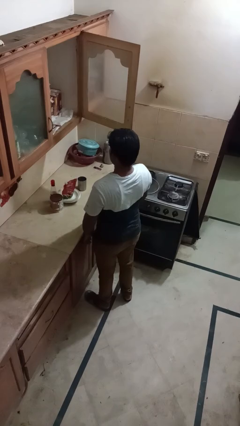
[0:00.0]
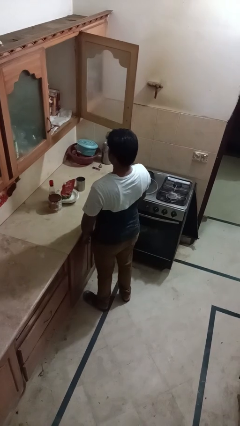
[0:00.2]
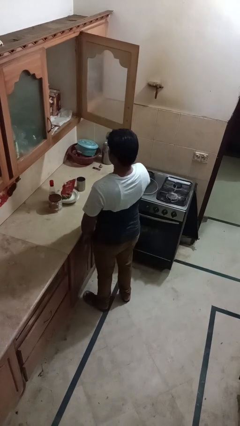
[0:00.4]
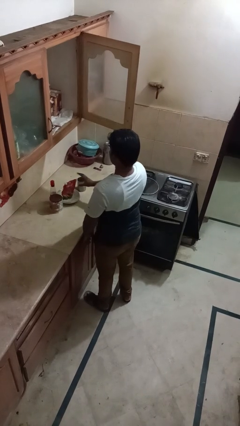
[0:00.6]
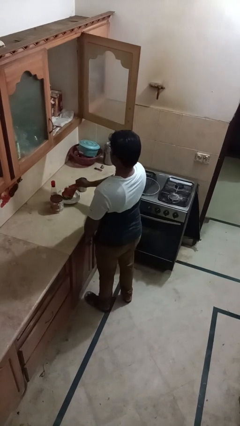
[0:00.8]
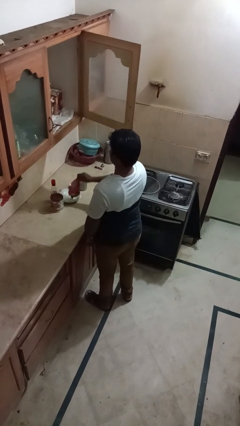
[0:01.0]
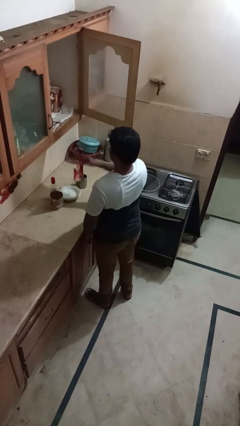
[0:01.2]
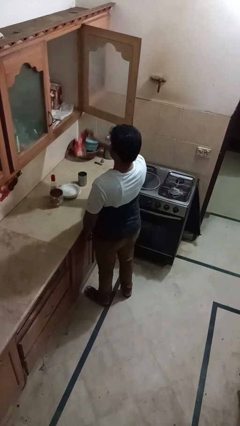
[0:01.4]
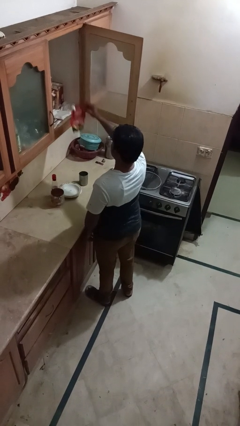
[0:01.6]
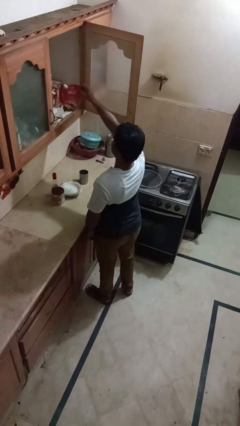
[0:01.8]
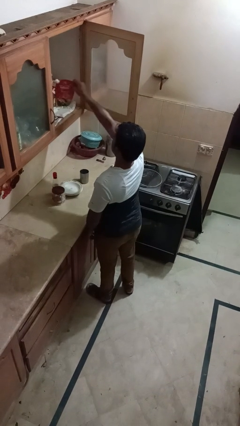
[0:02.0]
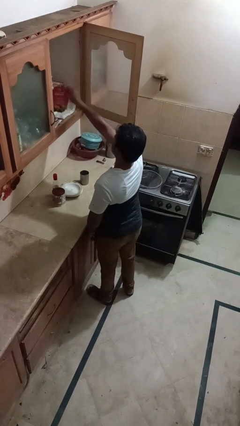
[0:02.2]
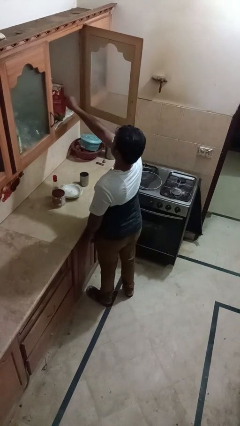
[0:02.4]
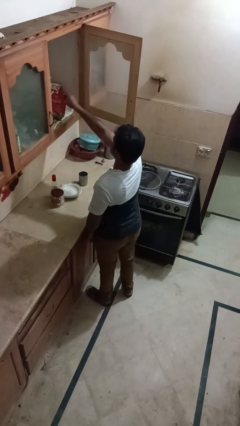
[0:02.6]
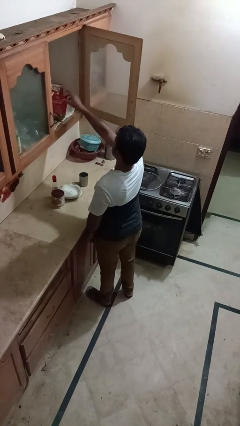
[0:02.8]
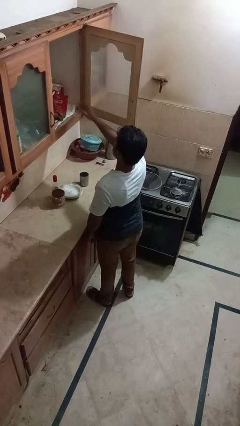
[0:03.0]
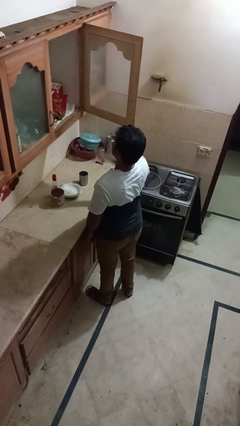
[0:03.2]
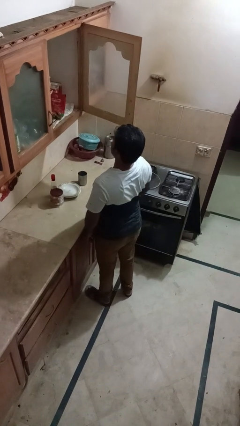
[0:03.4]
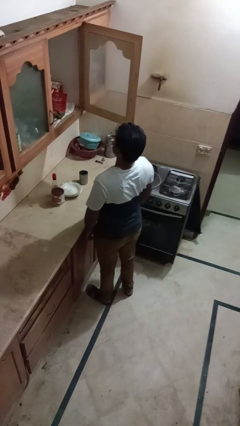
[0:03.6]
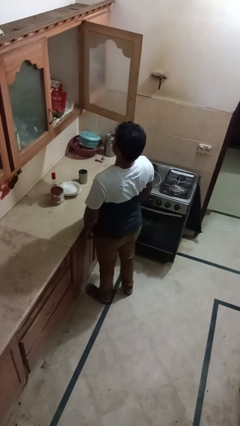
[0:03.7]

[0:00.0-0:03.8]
person puts object in cabinet

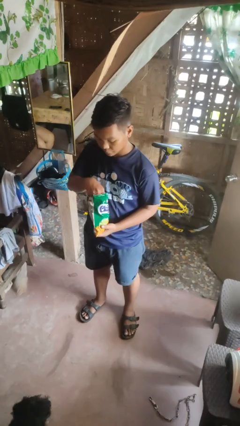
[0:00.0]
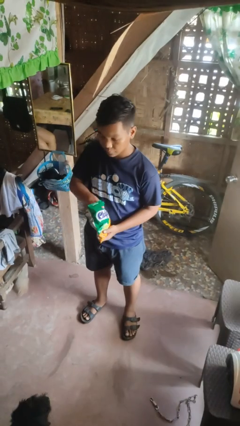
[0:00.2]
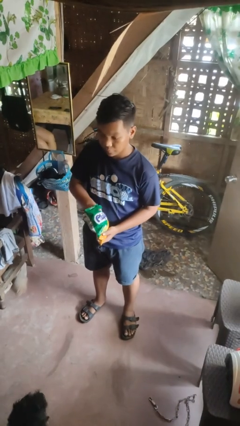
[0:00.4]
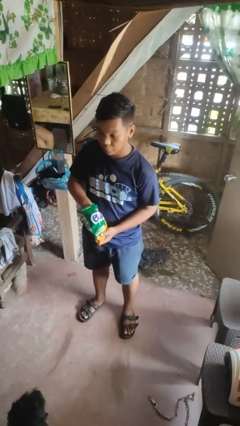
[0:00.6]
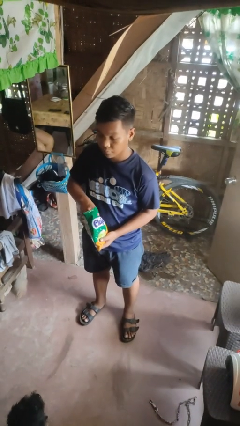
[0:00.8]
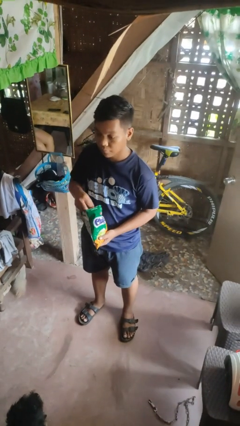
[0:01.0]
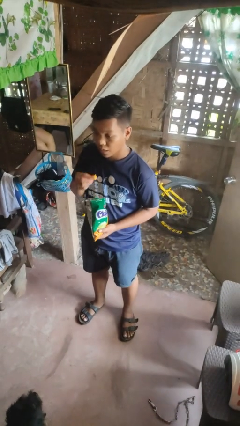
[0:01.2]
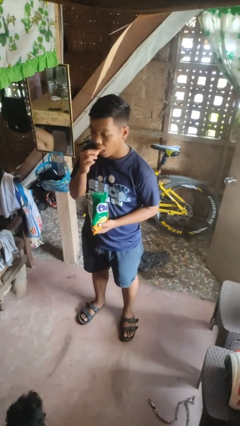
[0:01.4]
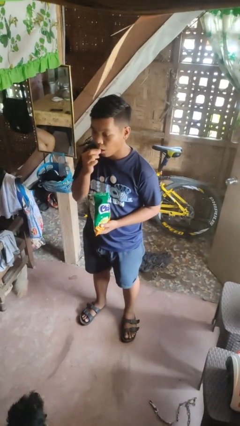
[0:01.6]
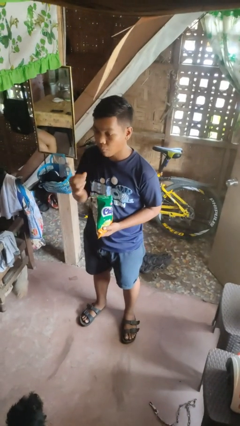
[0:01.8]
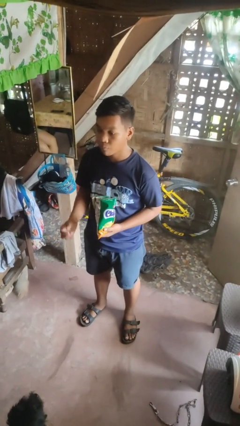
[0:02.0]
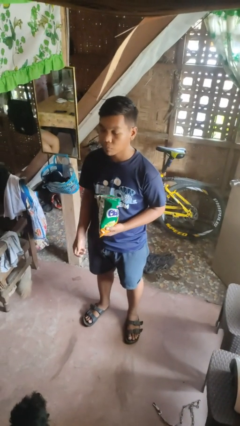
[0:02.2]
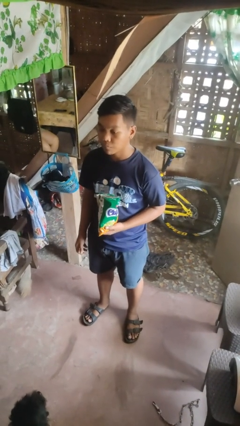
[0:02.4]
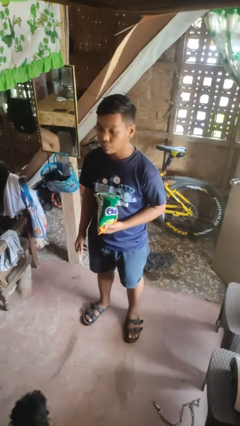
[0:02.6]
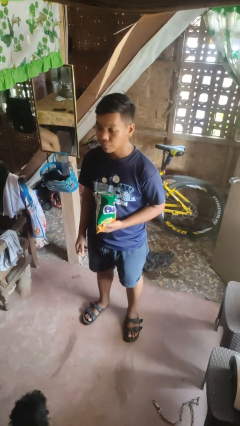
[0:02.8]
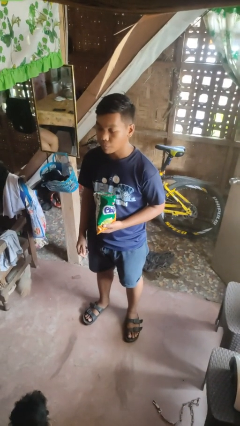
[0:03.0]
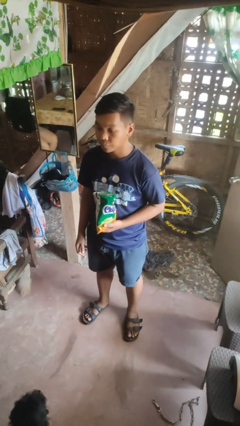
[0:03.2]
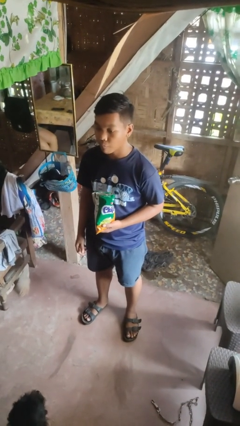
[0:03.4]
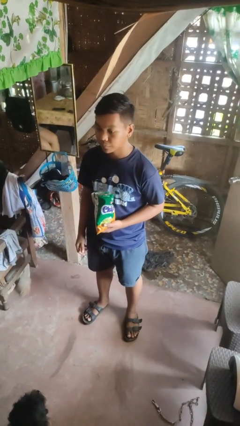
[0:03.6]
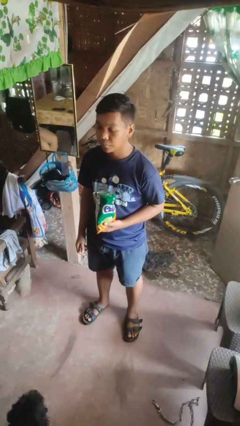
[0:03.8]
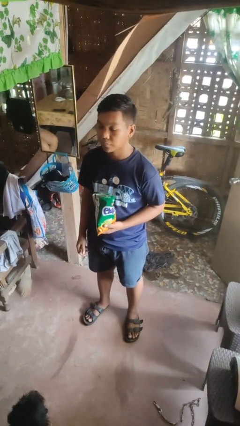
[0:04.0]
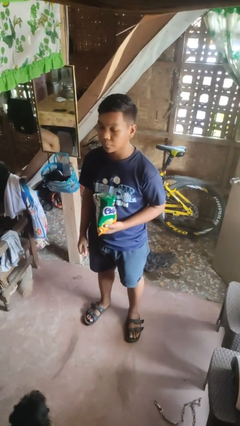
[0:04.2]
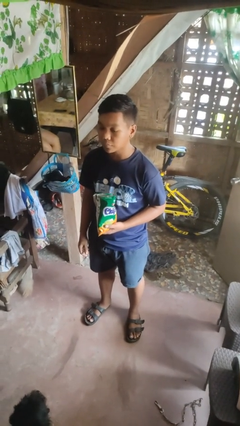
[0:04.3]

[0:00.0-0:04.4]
person eats snack from bag

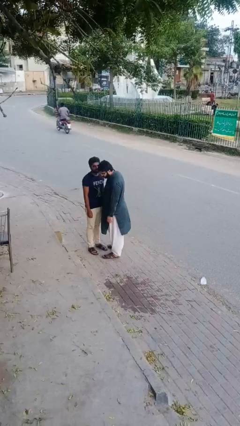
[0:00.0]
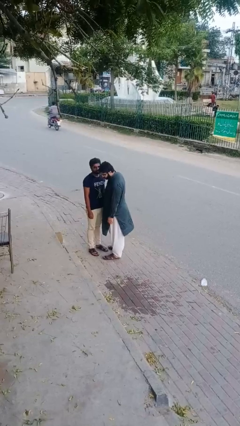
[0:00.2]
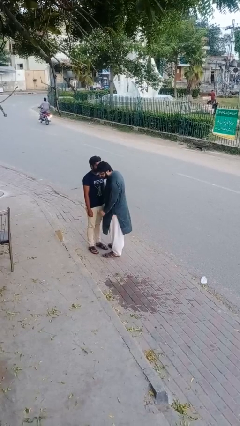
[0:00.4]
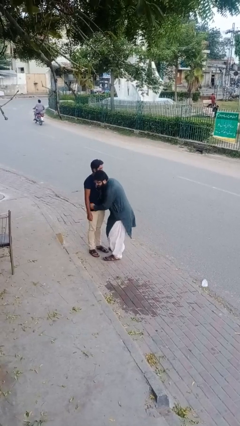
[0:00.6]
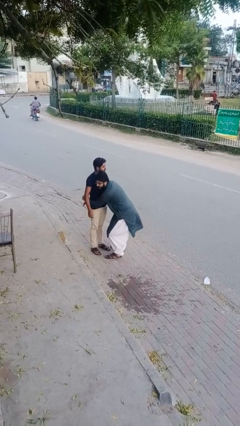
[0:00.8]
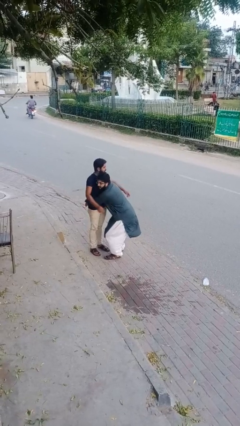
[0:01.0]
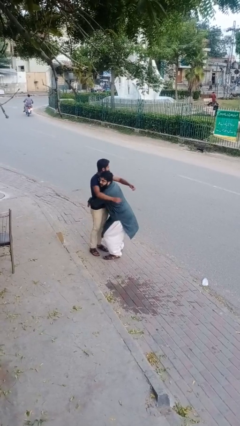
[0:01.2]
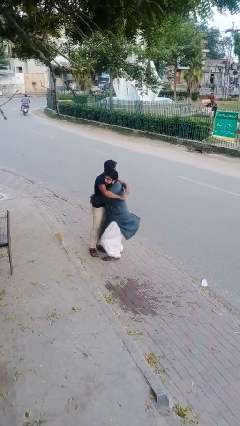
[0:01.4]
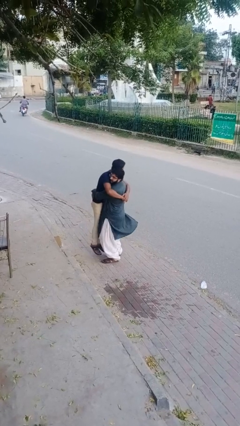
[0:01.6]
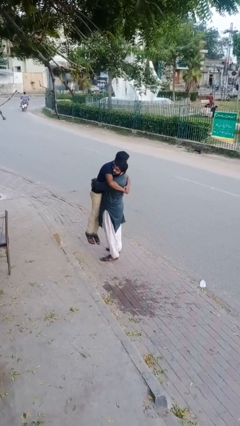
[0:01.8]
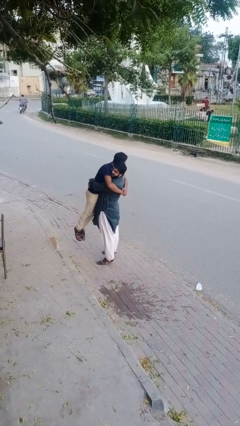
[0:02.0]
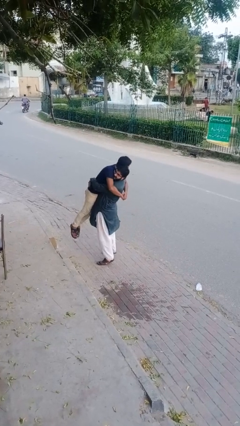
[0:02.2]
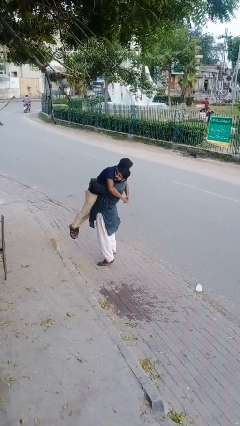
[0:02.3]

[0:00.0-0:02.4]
person picks up person

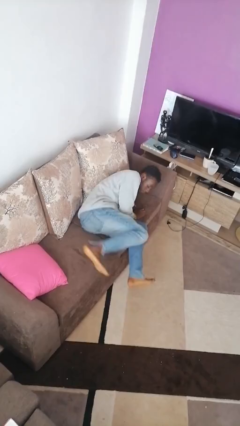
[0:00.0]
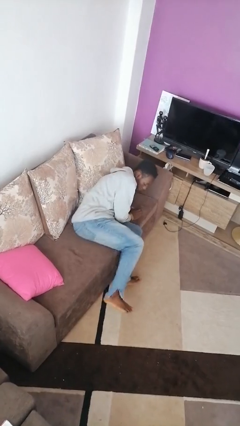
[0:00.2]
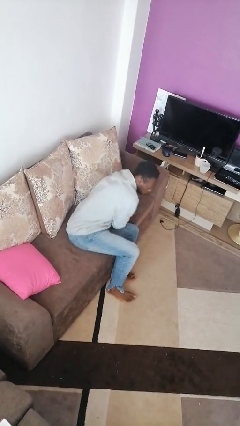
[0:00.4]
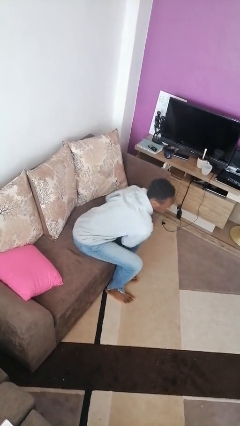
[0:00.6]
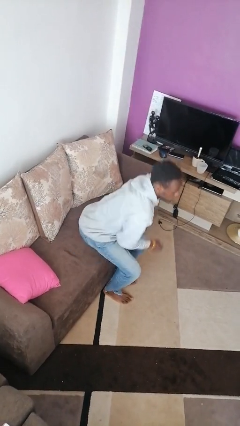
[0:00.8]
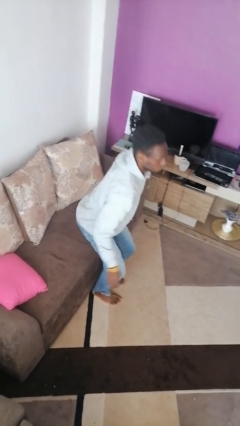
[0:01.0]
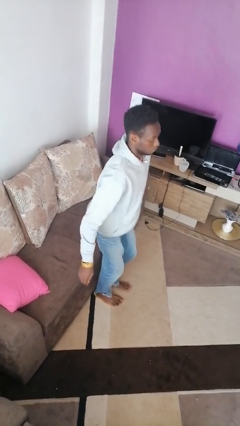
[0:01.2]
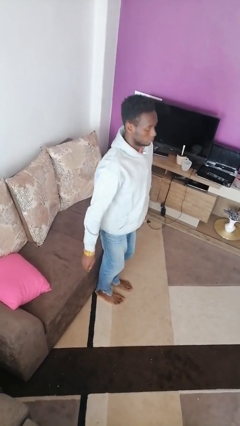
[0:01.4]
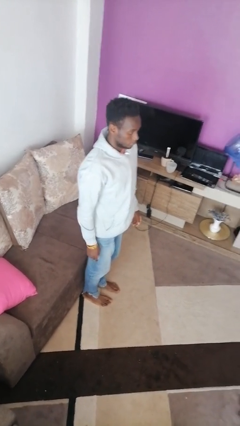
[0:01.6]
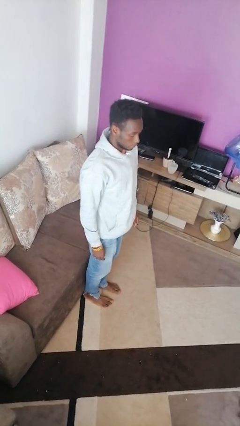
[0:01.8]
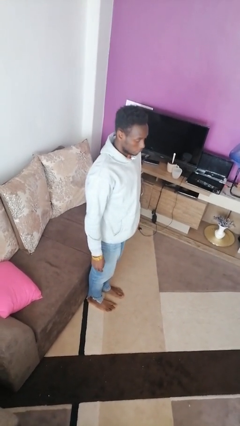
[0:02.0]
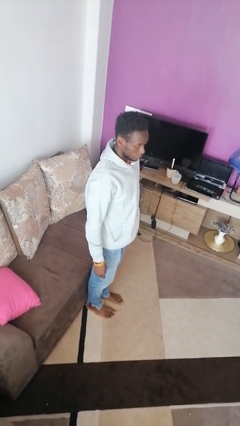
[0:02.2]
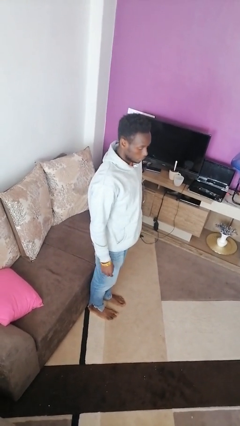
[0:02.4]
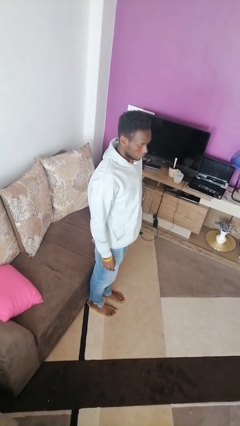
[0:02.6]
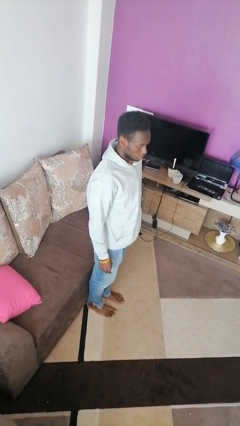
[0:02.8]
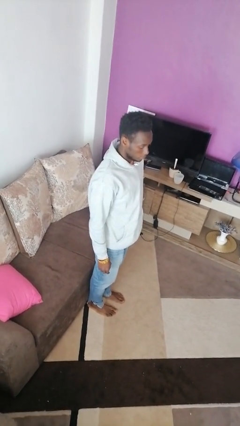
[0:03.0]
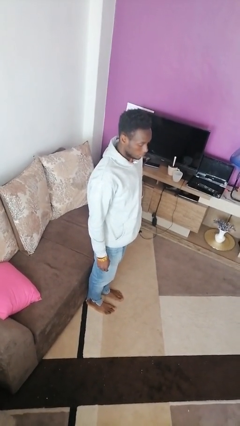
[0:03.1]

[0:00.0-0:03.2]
person stands up

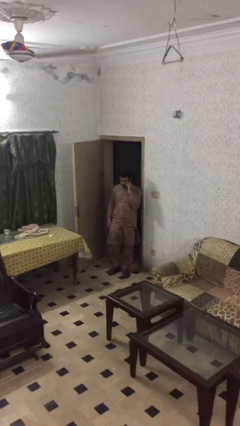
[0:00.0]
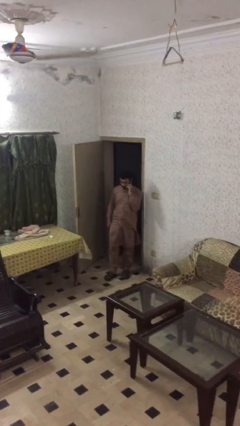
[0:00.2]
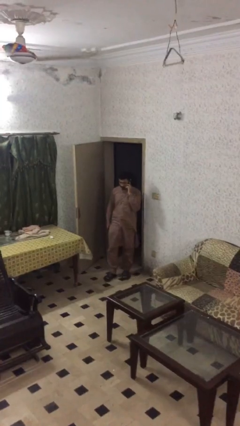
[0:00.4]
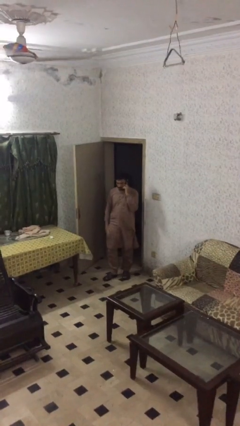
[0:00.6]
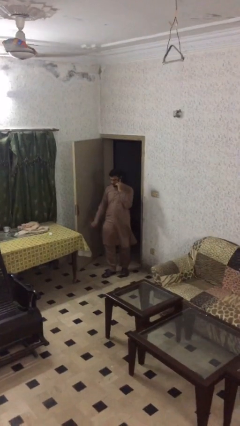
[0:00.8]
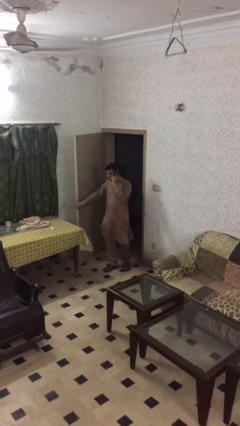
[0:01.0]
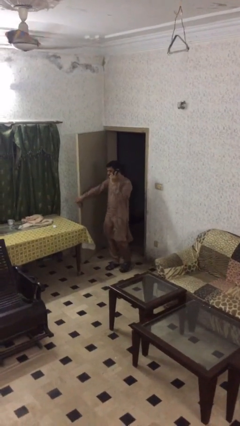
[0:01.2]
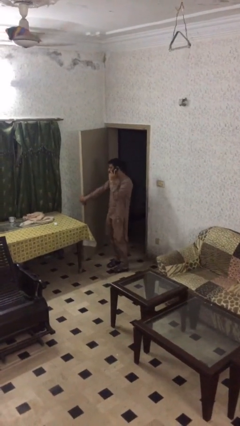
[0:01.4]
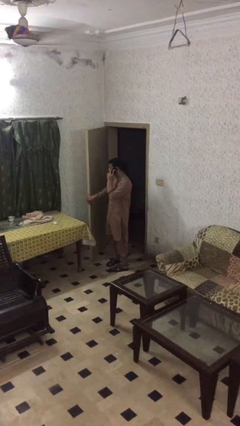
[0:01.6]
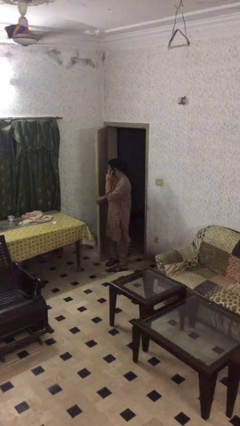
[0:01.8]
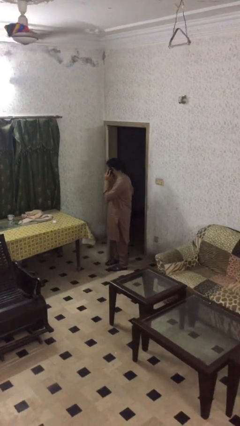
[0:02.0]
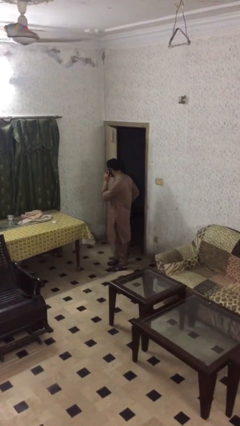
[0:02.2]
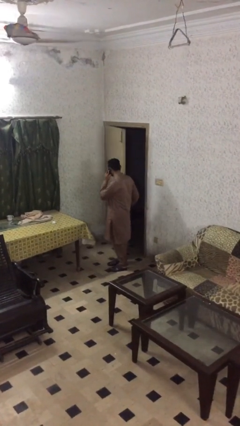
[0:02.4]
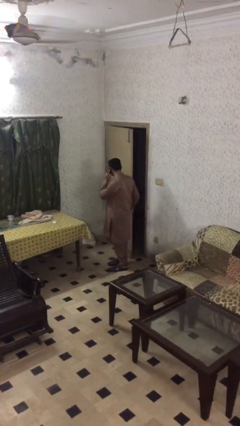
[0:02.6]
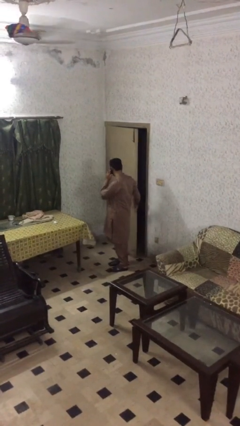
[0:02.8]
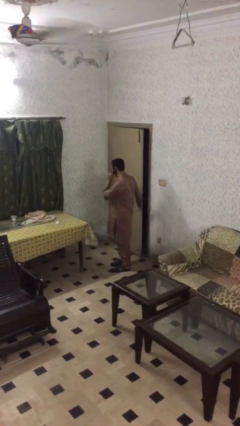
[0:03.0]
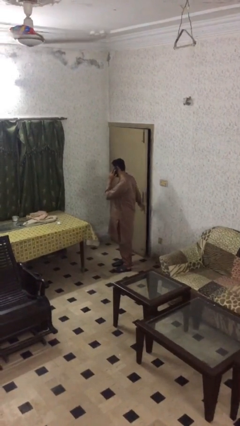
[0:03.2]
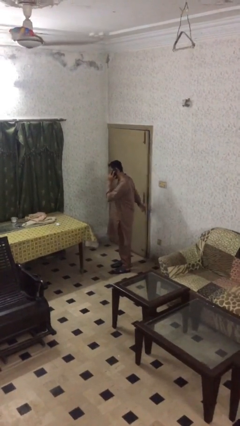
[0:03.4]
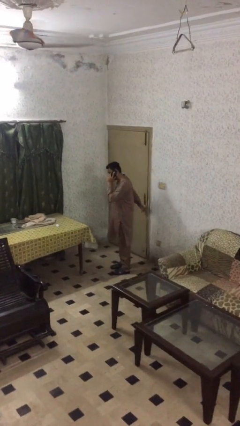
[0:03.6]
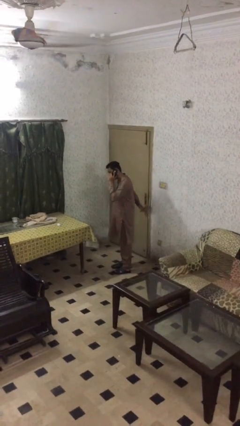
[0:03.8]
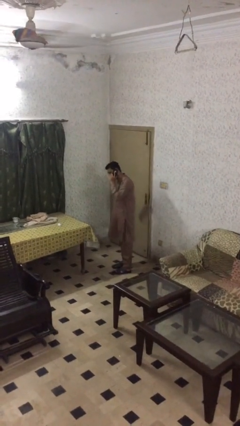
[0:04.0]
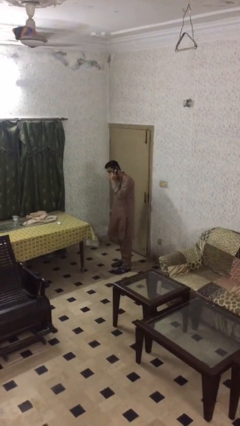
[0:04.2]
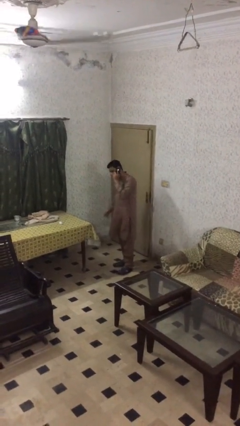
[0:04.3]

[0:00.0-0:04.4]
person closes facility door
